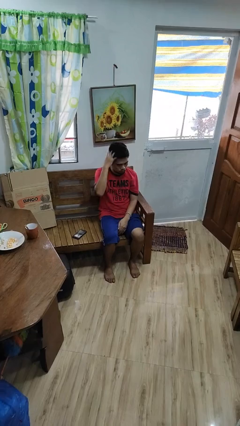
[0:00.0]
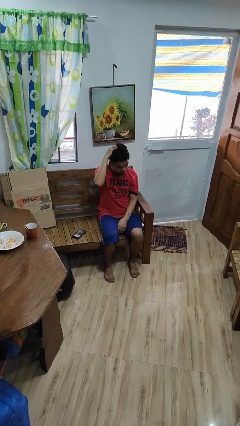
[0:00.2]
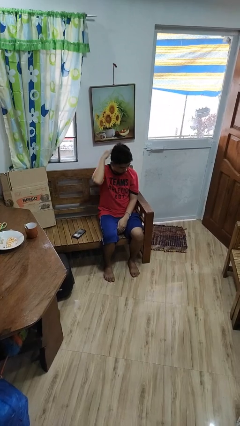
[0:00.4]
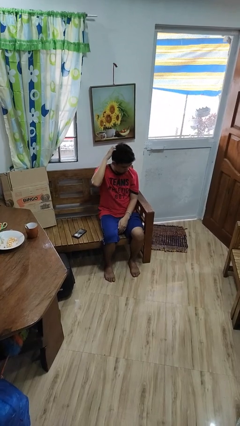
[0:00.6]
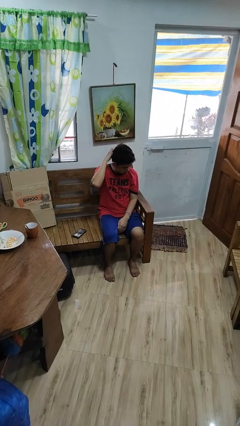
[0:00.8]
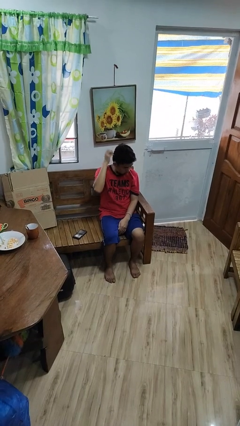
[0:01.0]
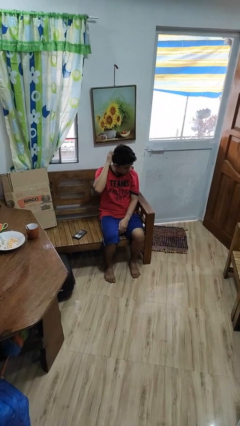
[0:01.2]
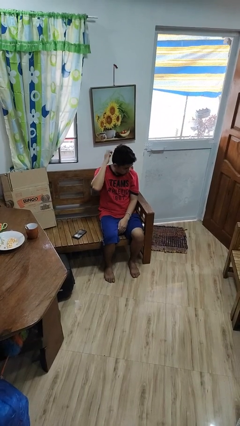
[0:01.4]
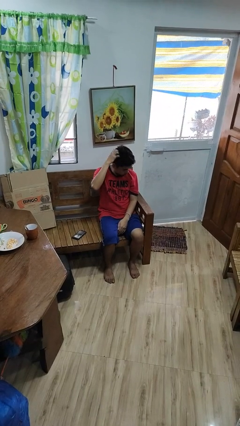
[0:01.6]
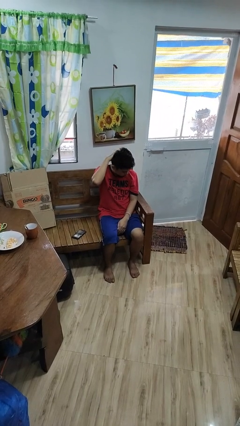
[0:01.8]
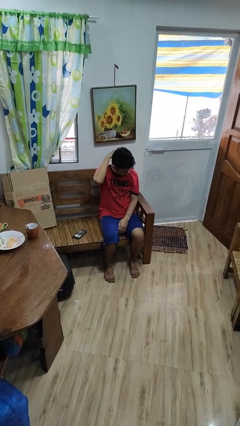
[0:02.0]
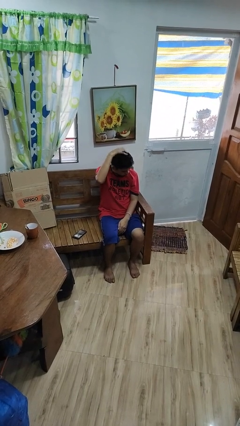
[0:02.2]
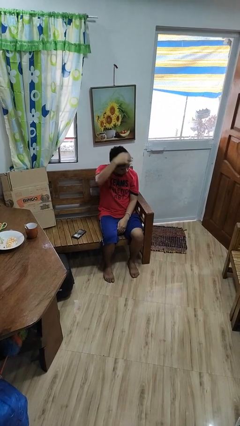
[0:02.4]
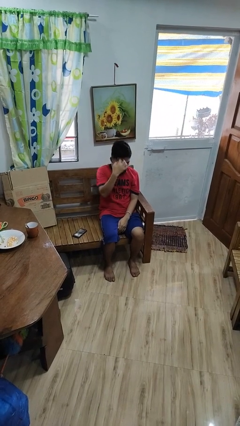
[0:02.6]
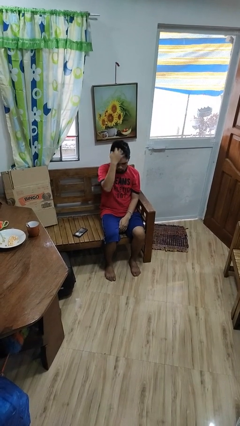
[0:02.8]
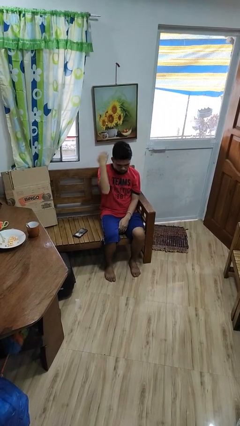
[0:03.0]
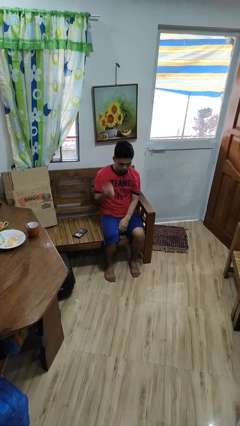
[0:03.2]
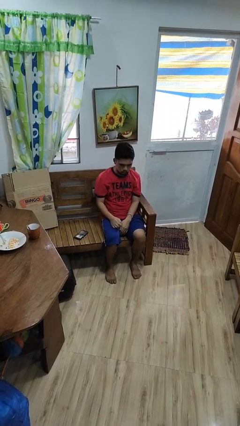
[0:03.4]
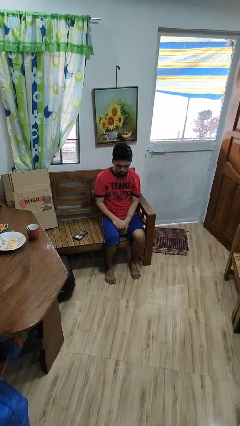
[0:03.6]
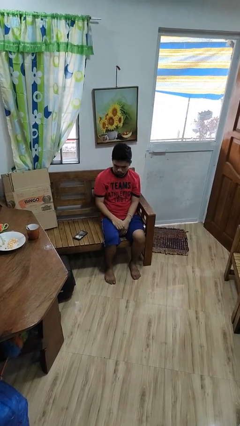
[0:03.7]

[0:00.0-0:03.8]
person strokes hair

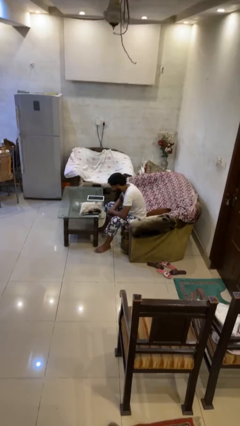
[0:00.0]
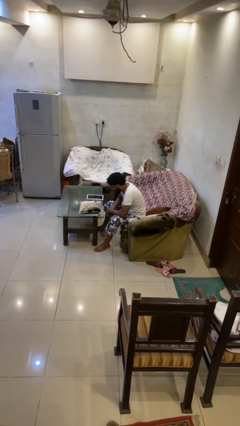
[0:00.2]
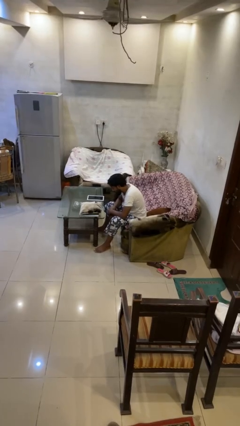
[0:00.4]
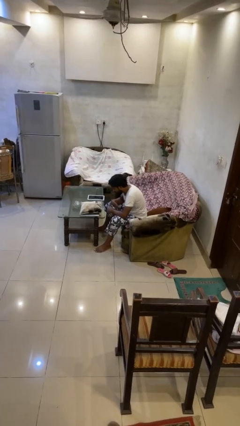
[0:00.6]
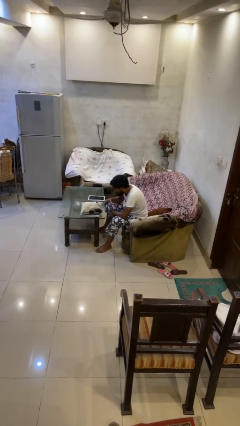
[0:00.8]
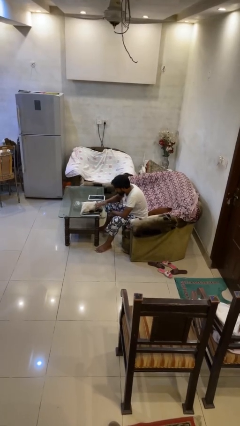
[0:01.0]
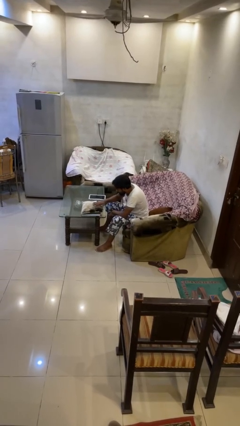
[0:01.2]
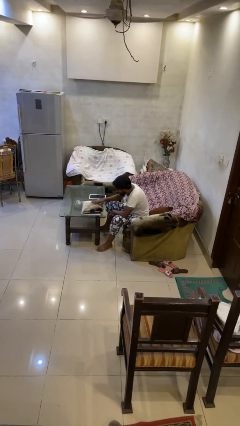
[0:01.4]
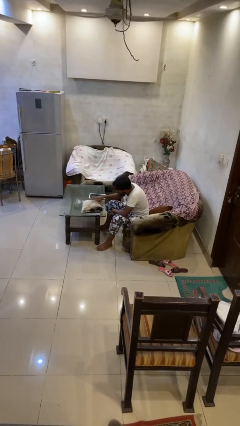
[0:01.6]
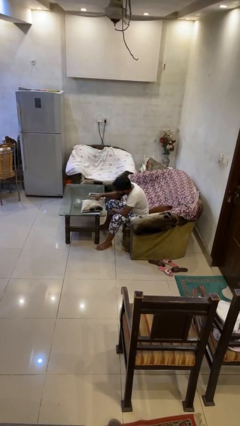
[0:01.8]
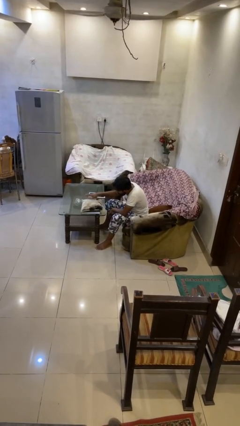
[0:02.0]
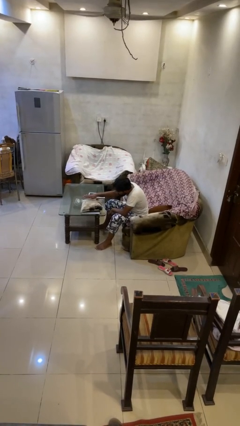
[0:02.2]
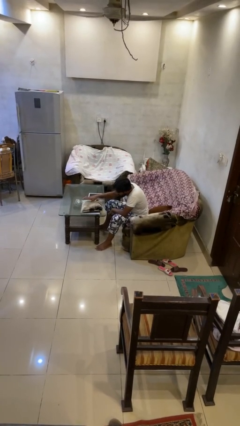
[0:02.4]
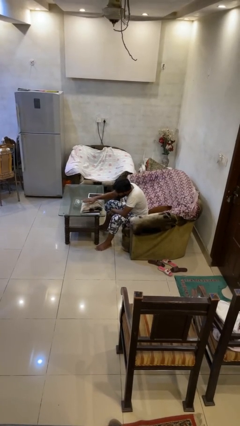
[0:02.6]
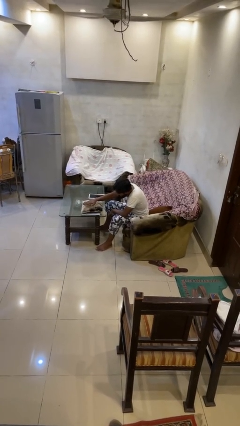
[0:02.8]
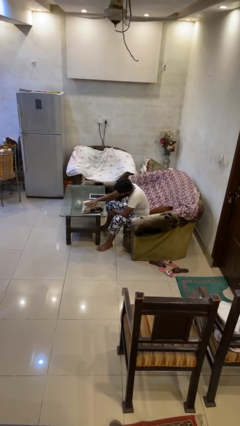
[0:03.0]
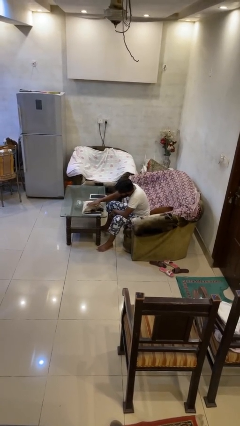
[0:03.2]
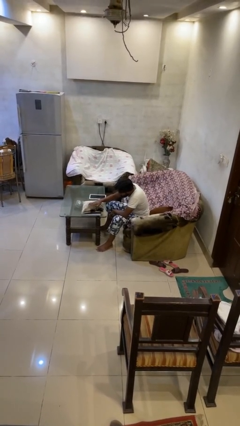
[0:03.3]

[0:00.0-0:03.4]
person waves hand over object

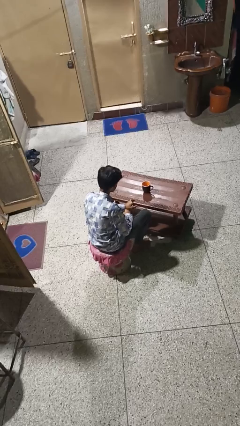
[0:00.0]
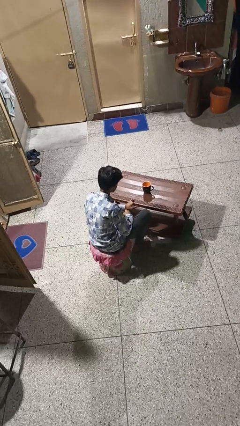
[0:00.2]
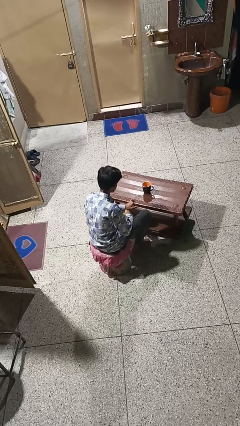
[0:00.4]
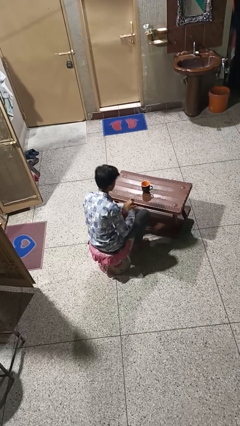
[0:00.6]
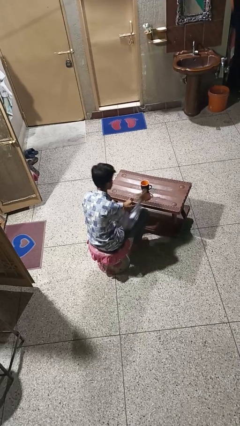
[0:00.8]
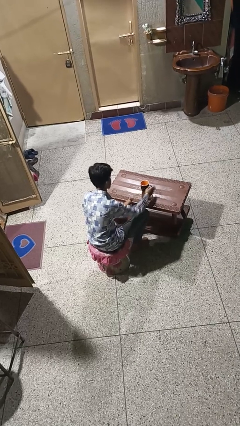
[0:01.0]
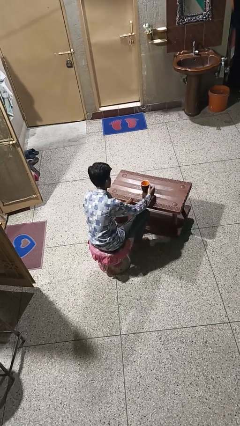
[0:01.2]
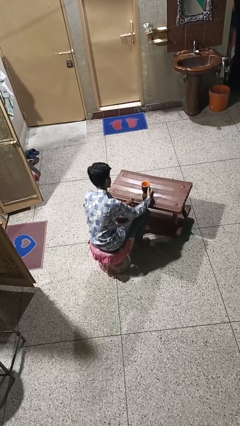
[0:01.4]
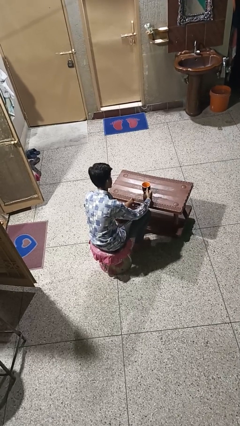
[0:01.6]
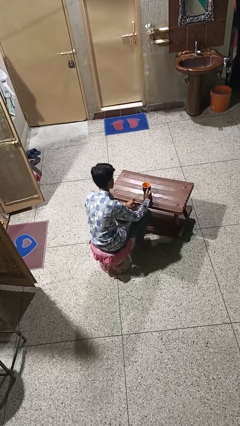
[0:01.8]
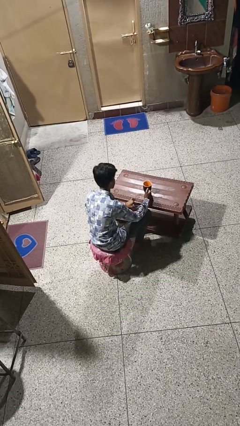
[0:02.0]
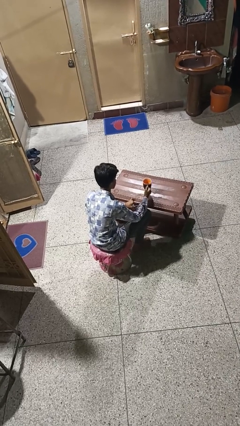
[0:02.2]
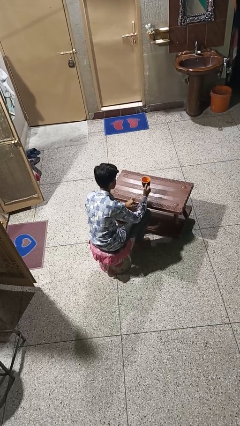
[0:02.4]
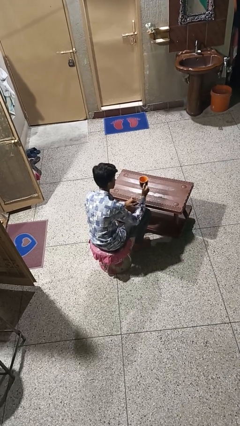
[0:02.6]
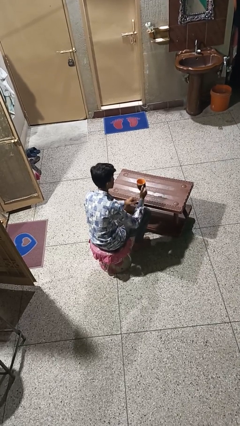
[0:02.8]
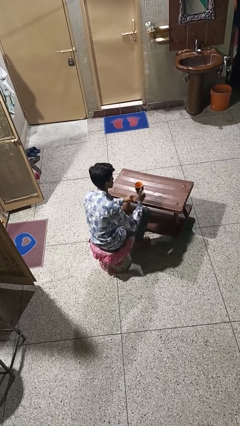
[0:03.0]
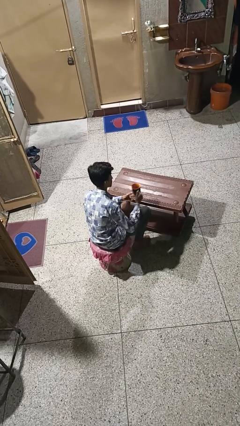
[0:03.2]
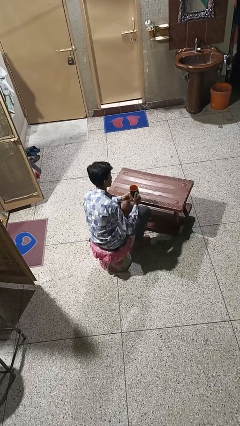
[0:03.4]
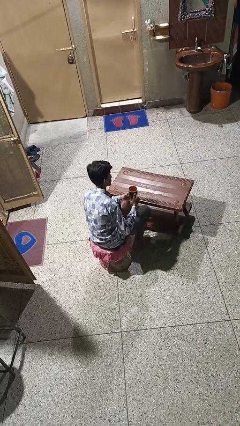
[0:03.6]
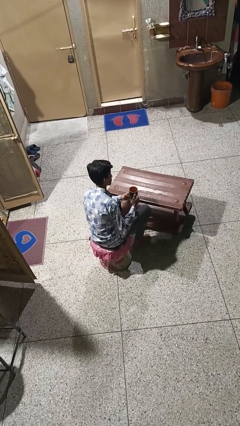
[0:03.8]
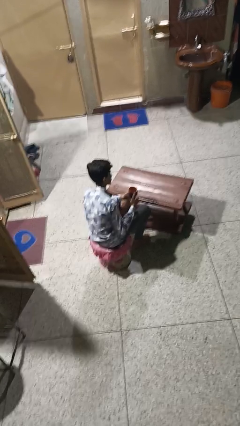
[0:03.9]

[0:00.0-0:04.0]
person picks up object from table

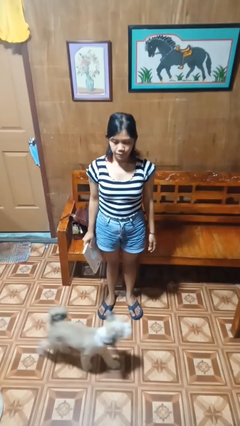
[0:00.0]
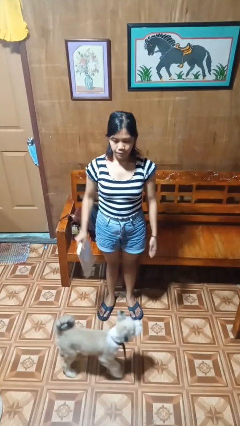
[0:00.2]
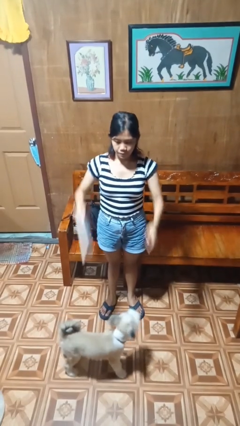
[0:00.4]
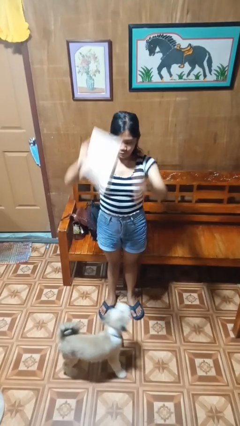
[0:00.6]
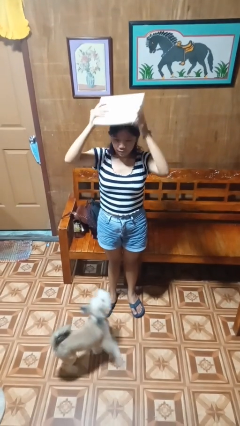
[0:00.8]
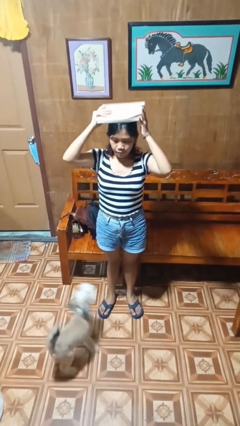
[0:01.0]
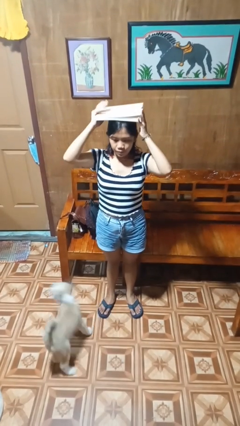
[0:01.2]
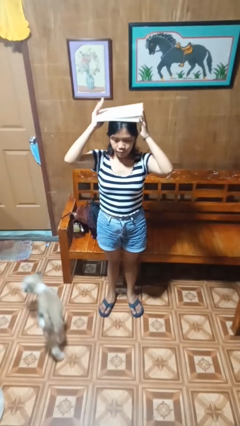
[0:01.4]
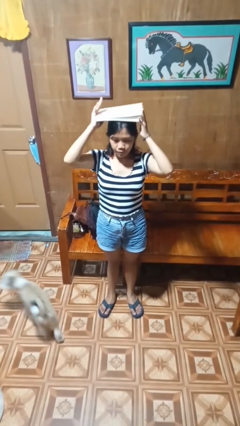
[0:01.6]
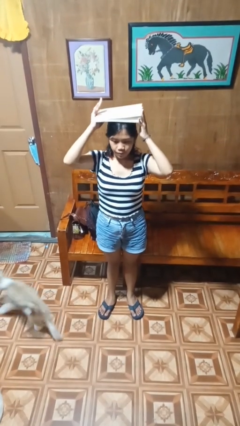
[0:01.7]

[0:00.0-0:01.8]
person holds object above head

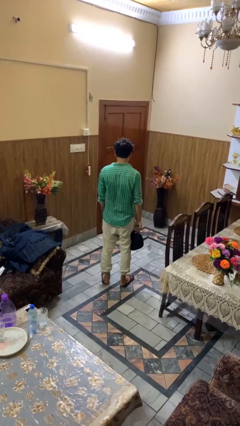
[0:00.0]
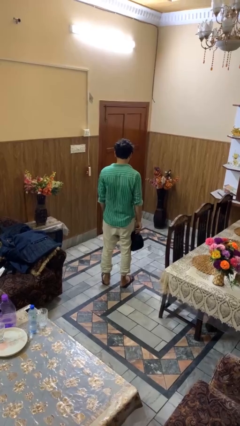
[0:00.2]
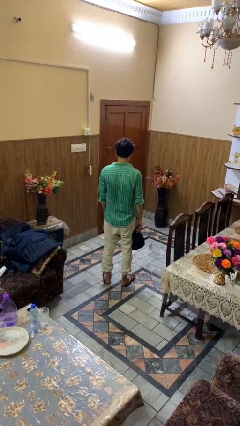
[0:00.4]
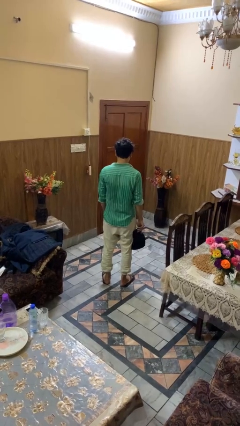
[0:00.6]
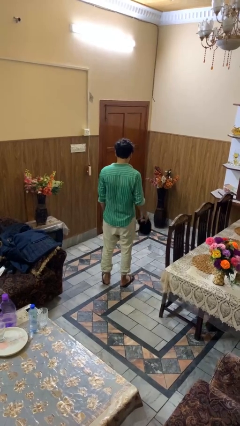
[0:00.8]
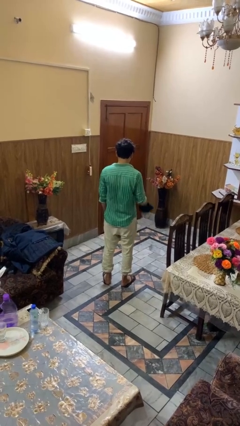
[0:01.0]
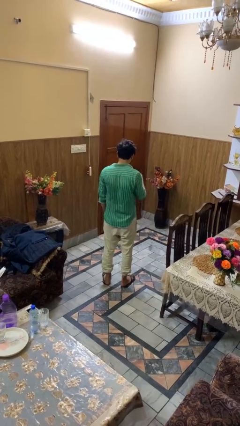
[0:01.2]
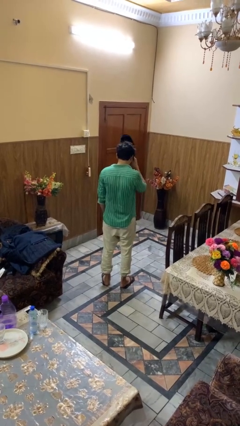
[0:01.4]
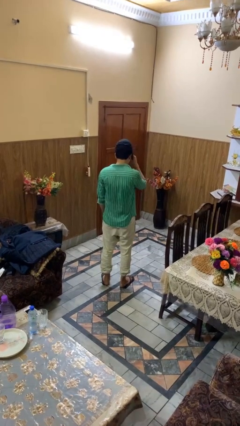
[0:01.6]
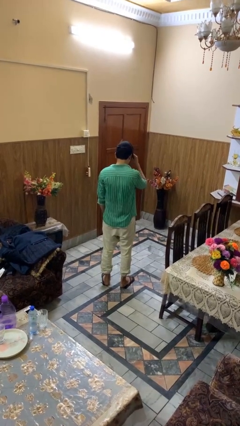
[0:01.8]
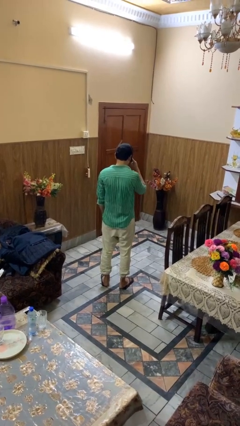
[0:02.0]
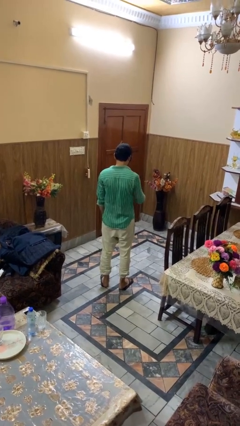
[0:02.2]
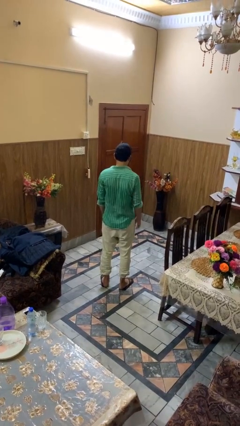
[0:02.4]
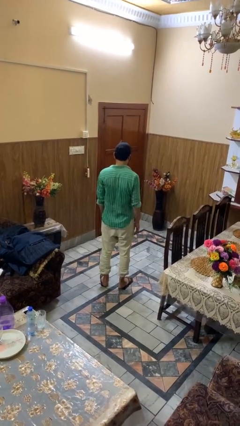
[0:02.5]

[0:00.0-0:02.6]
person puts on hat

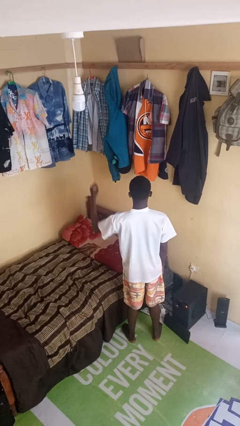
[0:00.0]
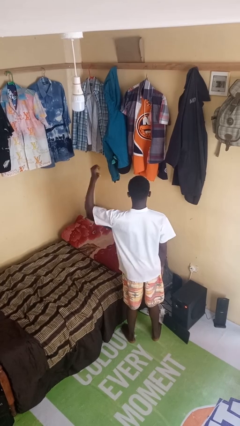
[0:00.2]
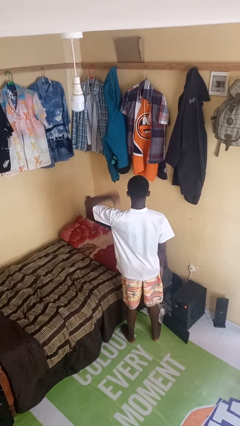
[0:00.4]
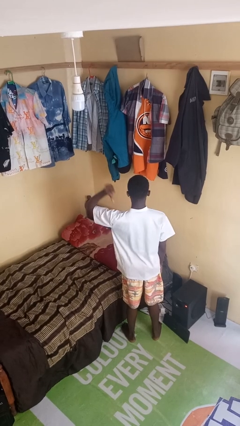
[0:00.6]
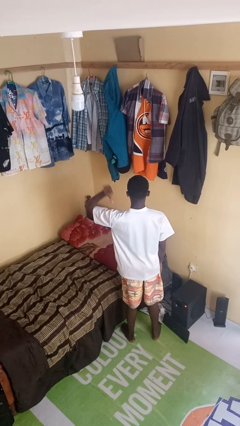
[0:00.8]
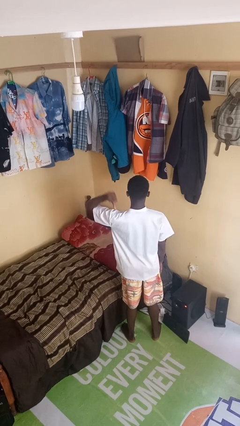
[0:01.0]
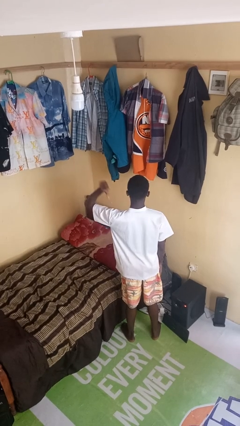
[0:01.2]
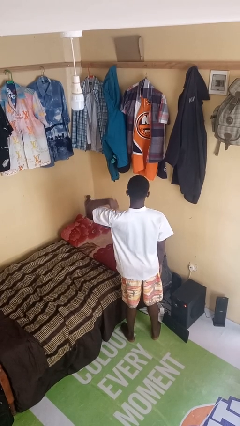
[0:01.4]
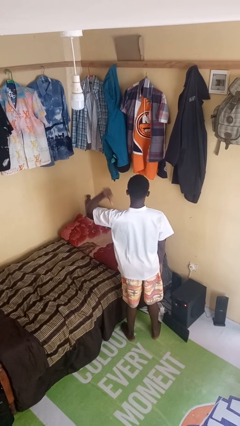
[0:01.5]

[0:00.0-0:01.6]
person gestures behind me
